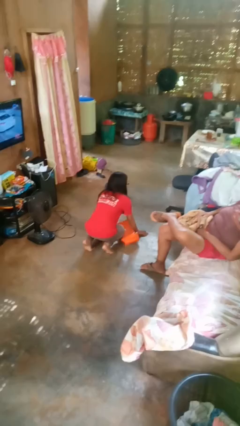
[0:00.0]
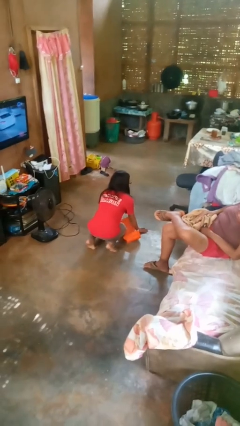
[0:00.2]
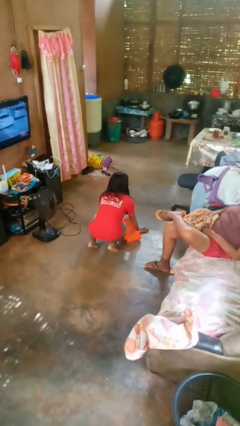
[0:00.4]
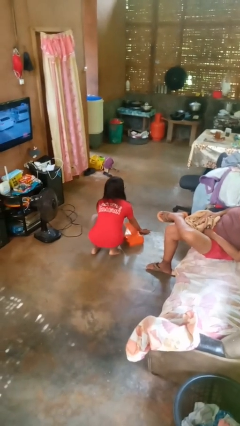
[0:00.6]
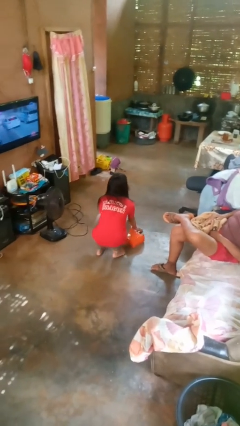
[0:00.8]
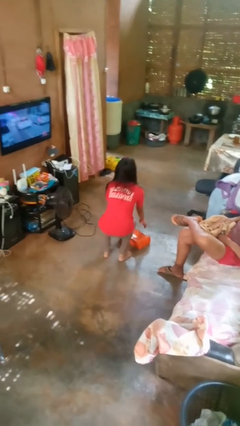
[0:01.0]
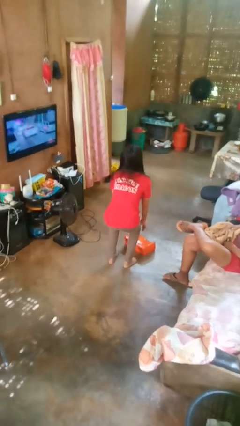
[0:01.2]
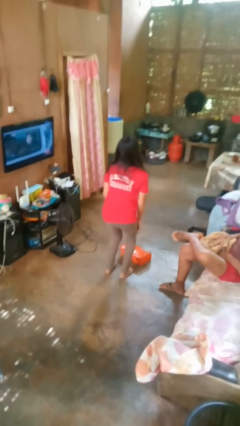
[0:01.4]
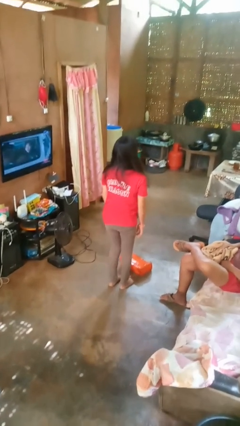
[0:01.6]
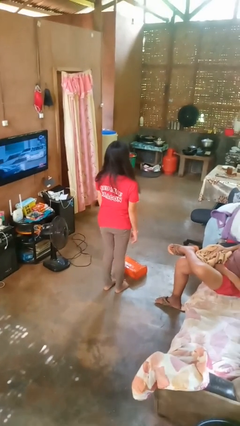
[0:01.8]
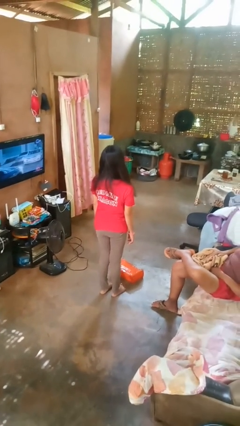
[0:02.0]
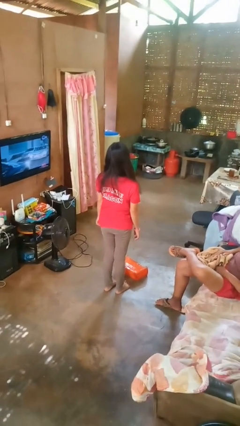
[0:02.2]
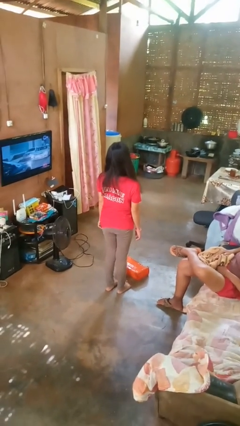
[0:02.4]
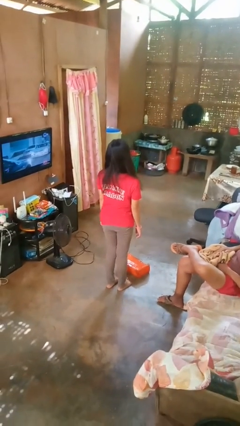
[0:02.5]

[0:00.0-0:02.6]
person stands up from floor

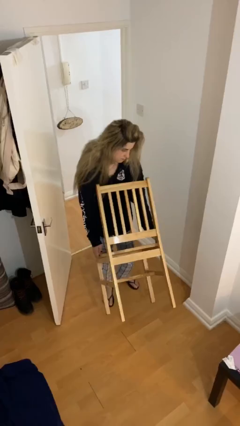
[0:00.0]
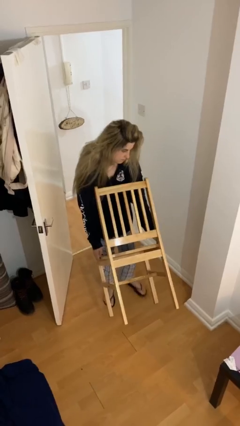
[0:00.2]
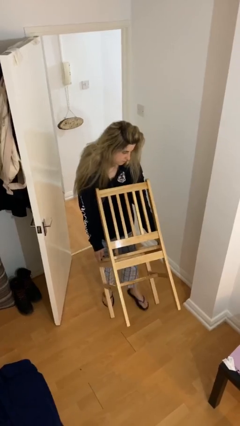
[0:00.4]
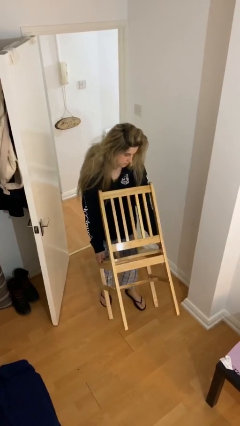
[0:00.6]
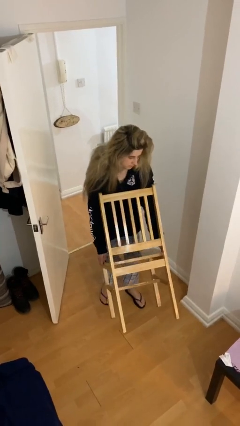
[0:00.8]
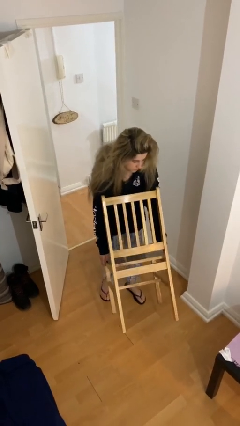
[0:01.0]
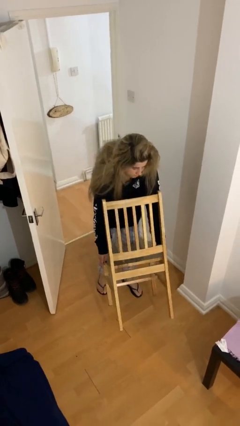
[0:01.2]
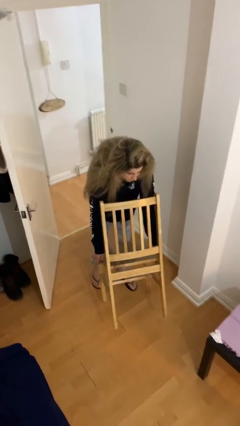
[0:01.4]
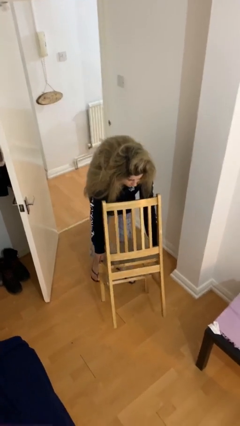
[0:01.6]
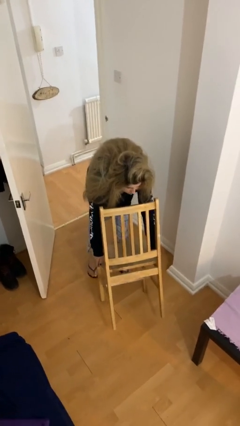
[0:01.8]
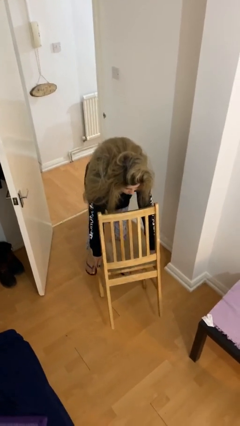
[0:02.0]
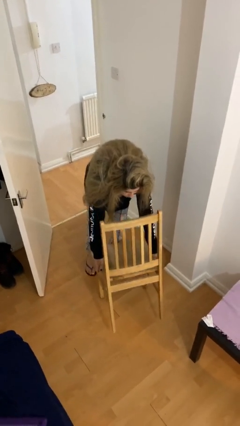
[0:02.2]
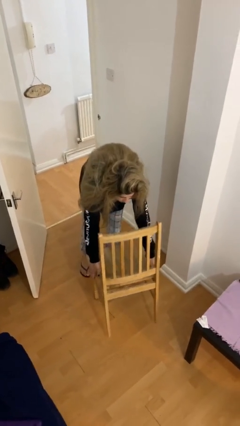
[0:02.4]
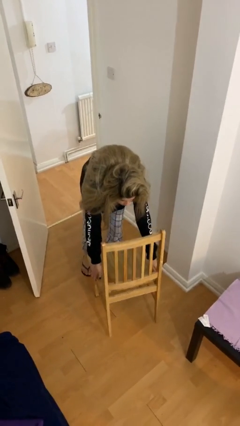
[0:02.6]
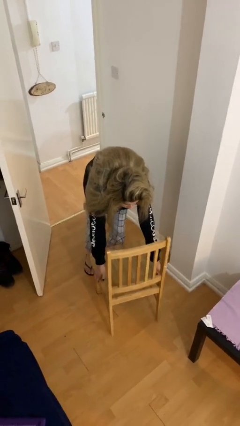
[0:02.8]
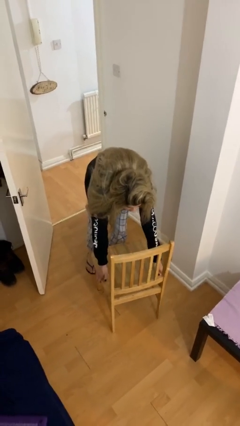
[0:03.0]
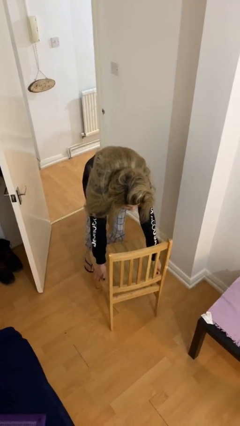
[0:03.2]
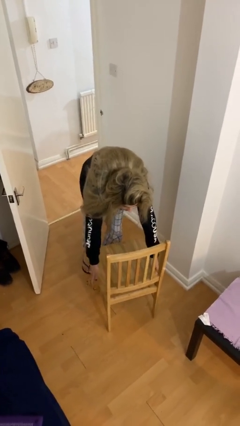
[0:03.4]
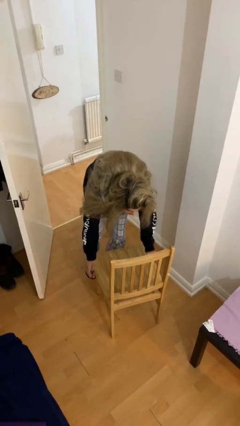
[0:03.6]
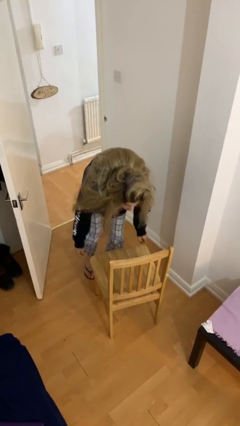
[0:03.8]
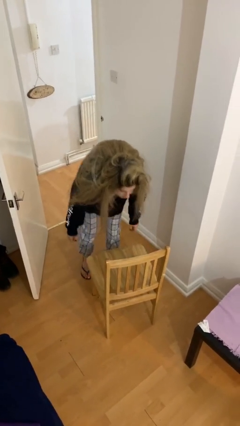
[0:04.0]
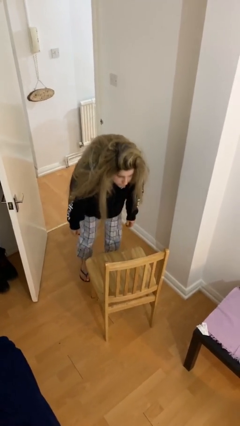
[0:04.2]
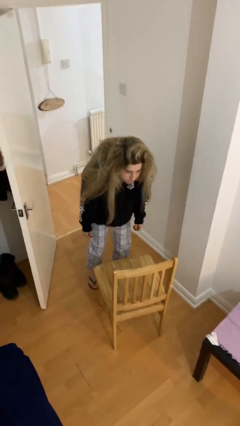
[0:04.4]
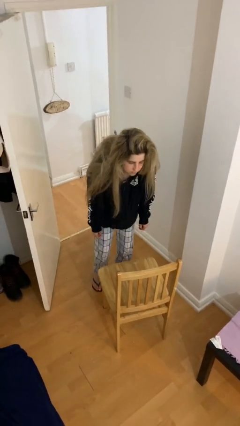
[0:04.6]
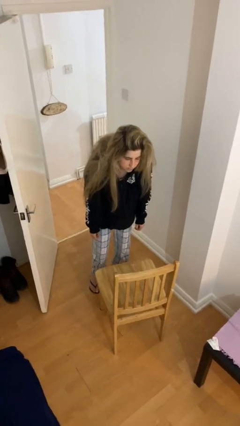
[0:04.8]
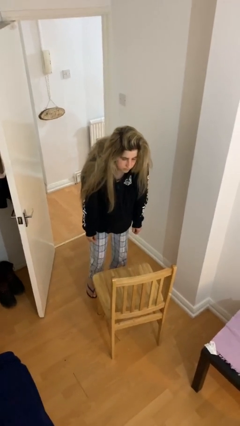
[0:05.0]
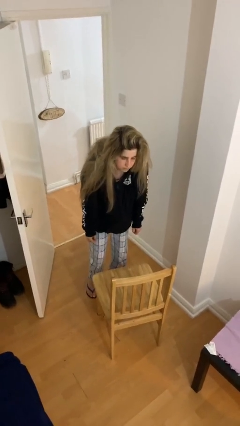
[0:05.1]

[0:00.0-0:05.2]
person puts down object on floor

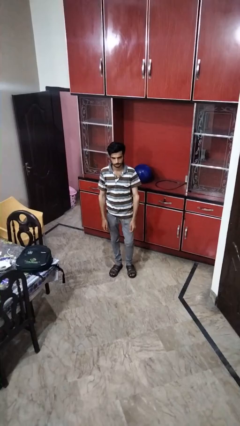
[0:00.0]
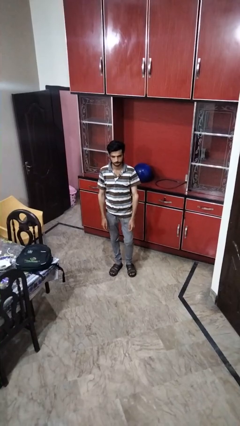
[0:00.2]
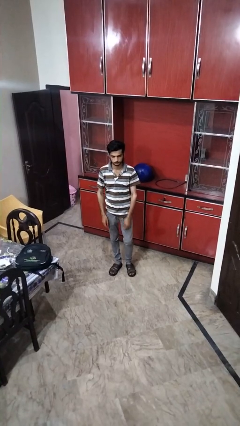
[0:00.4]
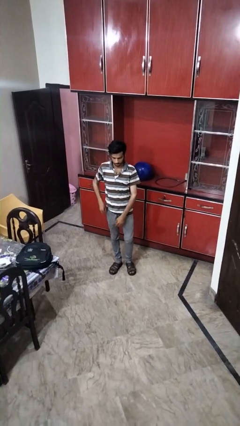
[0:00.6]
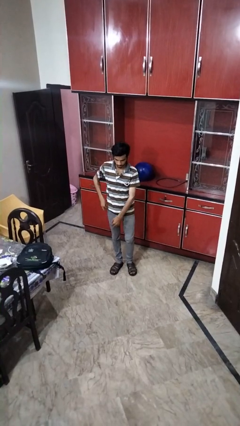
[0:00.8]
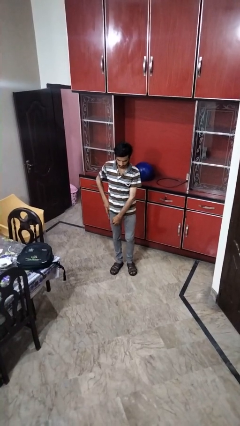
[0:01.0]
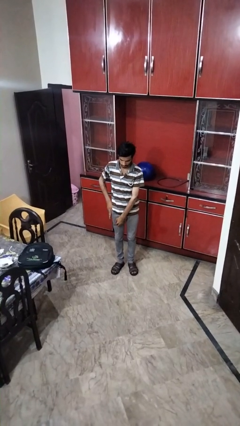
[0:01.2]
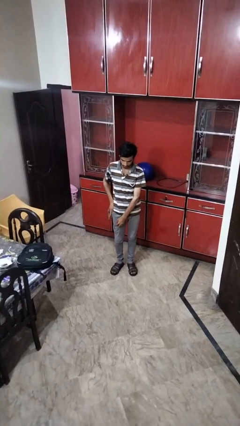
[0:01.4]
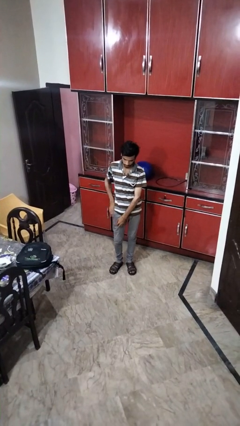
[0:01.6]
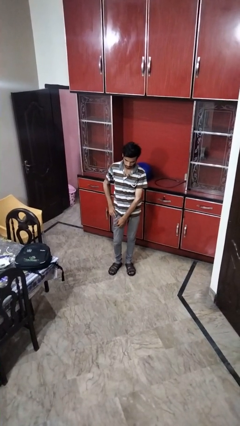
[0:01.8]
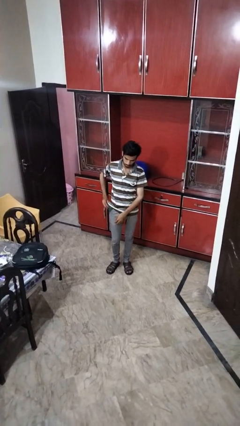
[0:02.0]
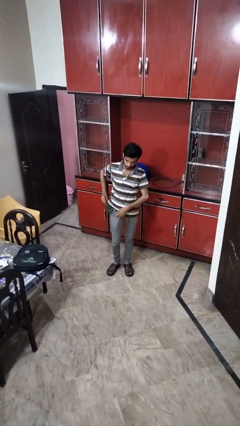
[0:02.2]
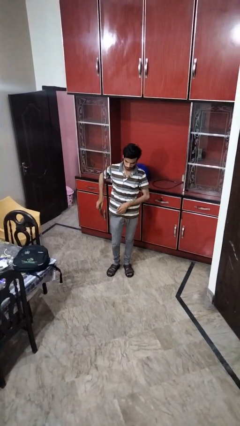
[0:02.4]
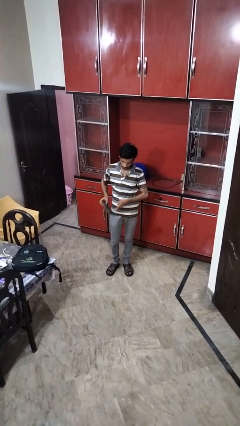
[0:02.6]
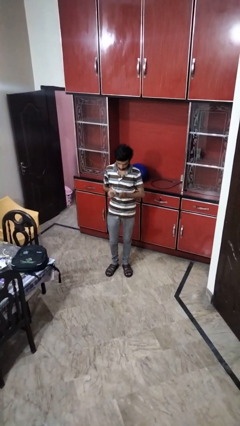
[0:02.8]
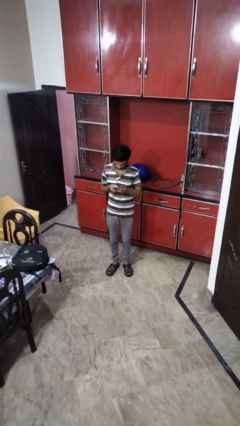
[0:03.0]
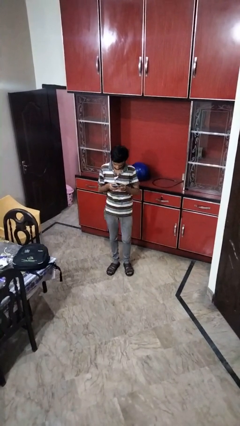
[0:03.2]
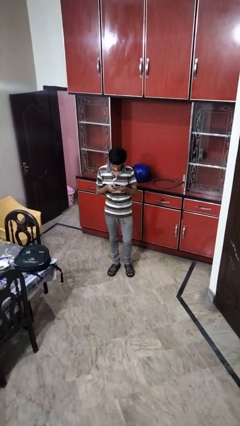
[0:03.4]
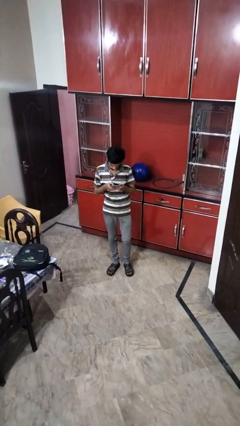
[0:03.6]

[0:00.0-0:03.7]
person takes phone from pocket

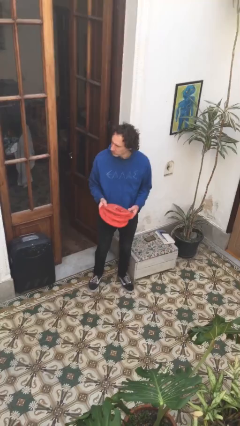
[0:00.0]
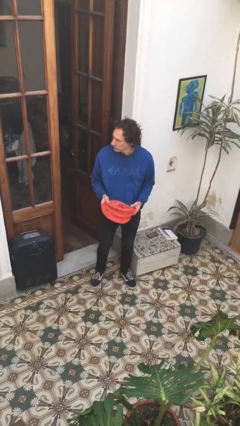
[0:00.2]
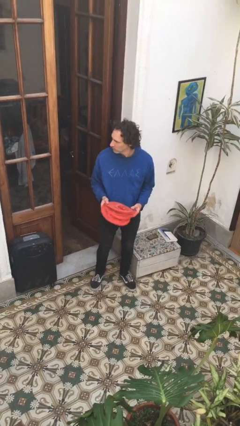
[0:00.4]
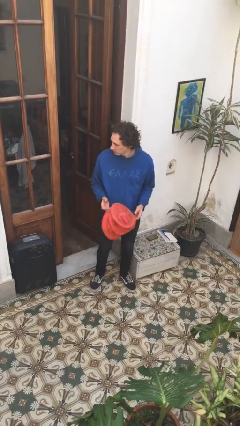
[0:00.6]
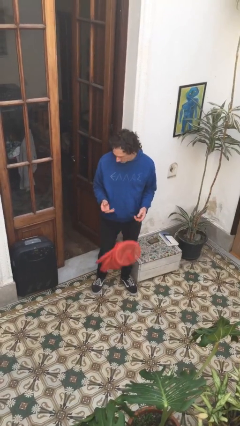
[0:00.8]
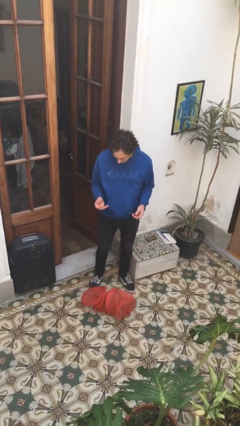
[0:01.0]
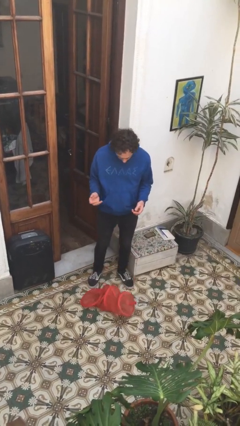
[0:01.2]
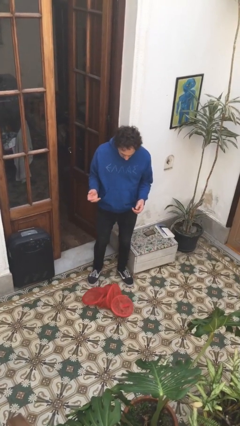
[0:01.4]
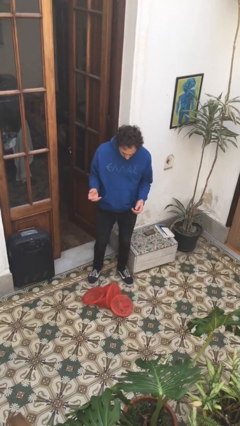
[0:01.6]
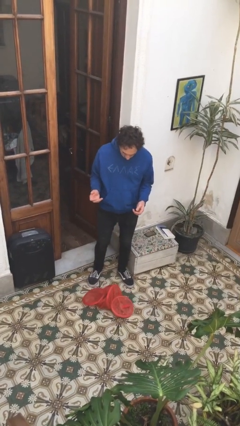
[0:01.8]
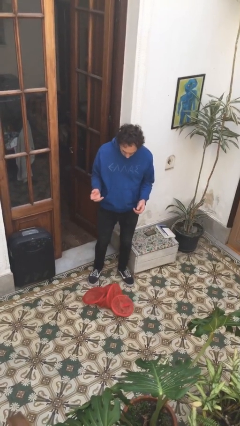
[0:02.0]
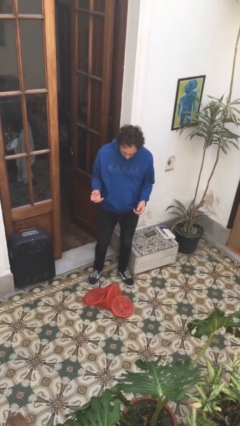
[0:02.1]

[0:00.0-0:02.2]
person drops object

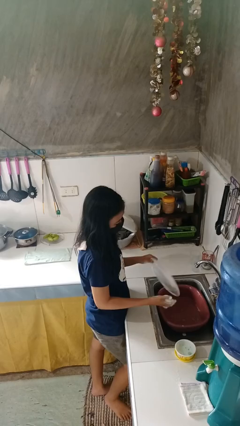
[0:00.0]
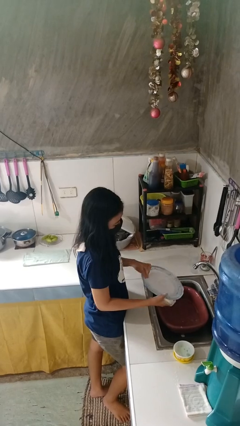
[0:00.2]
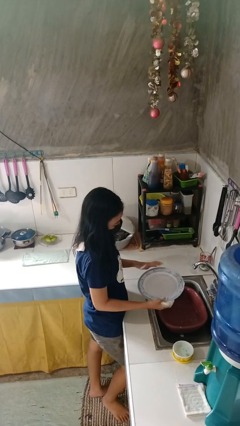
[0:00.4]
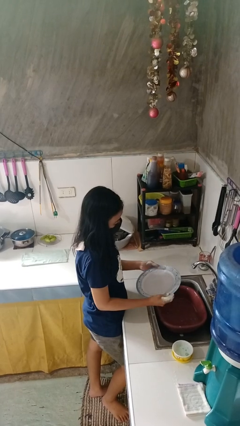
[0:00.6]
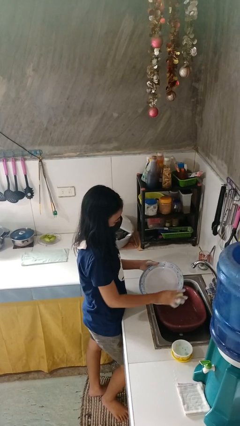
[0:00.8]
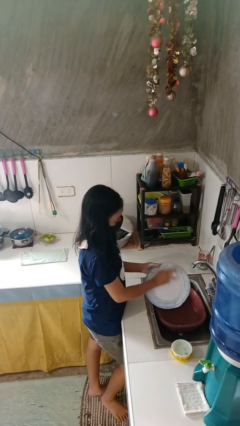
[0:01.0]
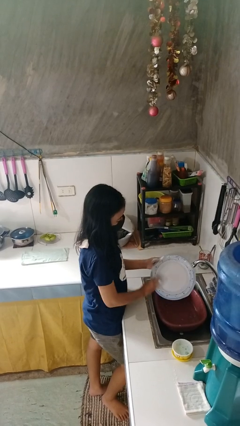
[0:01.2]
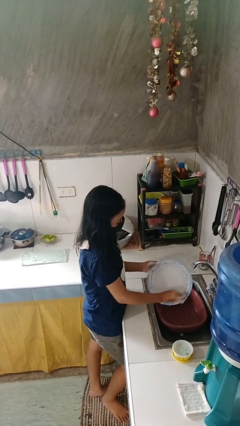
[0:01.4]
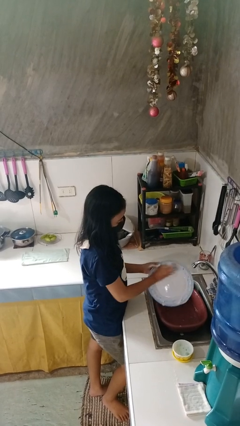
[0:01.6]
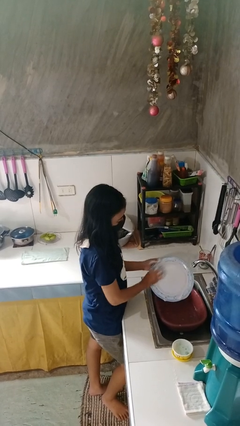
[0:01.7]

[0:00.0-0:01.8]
person washes dish

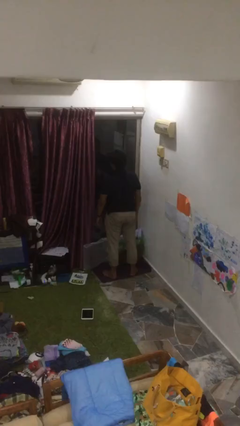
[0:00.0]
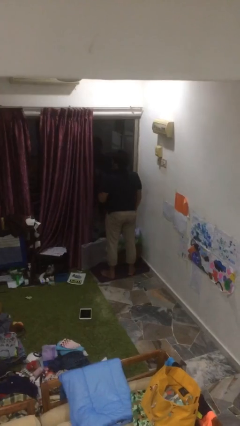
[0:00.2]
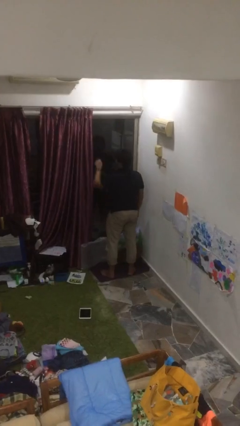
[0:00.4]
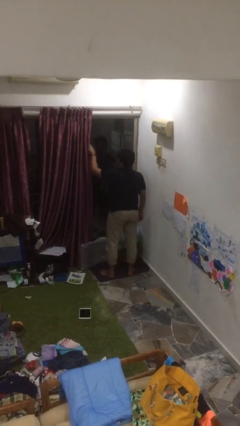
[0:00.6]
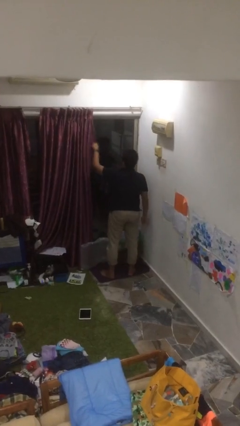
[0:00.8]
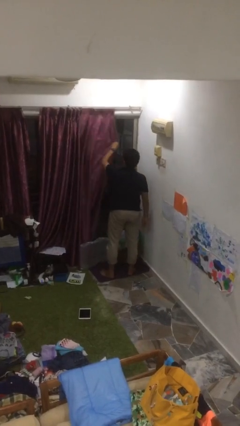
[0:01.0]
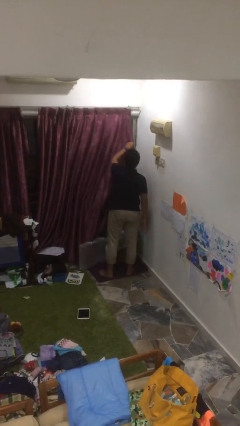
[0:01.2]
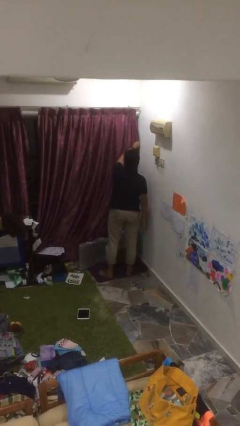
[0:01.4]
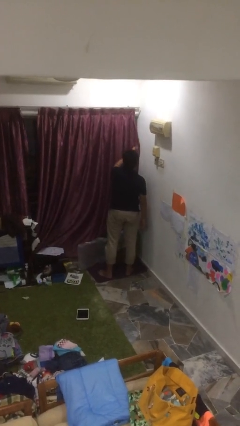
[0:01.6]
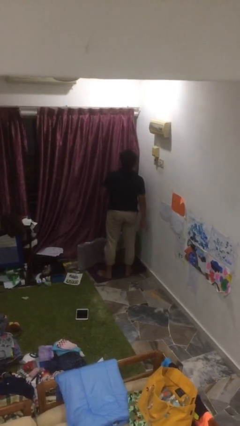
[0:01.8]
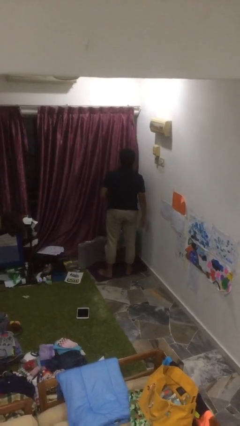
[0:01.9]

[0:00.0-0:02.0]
person closes curtains
